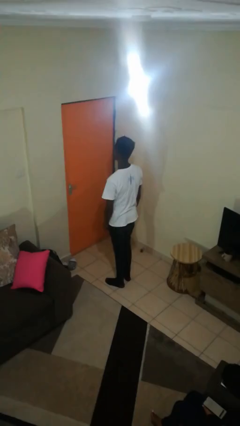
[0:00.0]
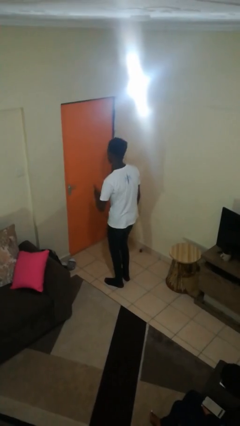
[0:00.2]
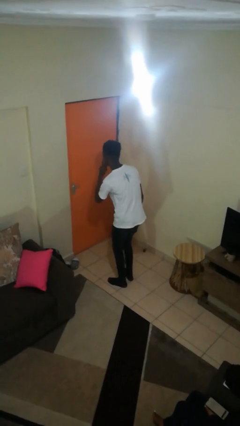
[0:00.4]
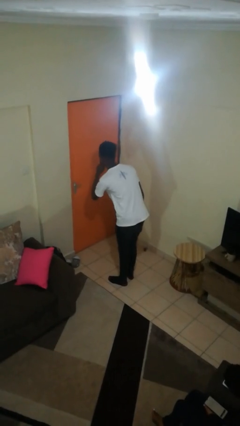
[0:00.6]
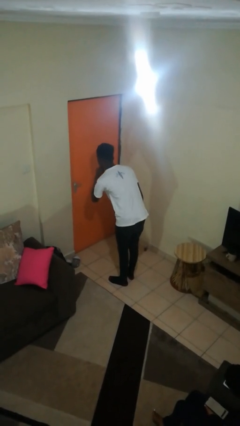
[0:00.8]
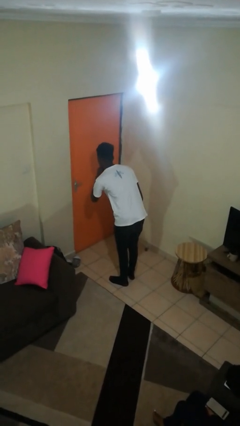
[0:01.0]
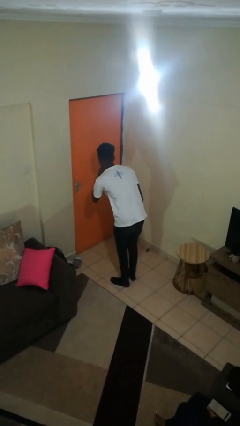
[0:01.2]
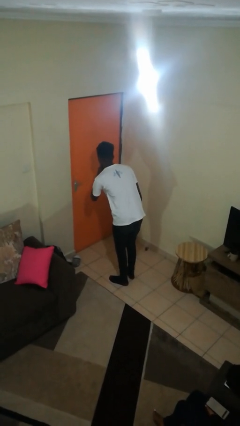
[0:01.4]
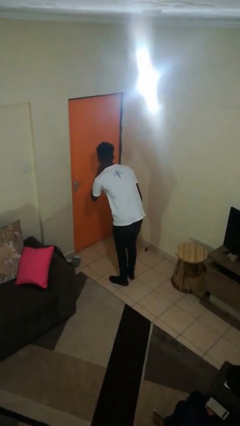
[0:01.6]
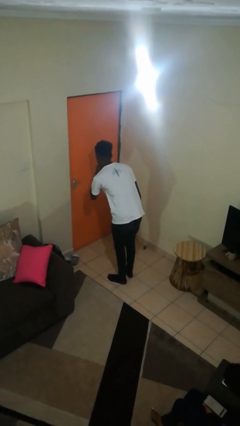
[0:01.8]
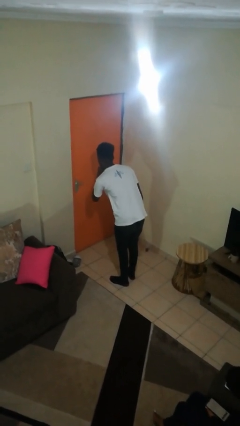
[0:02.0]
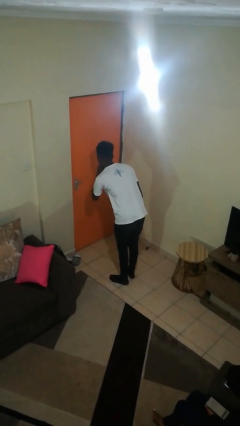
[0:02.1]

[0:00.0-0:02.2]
person gestures be quiet

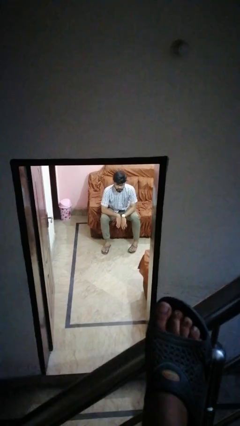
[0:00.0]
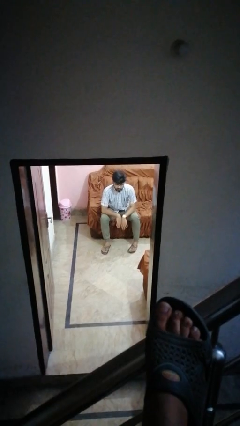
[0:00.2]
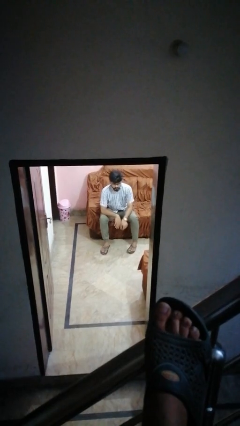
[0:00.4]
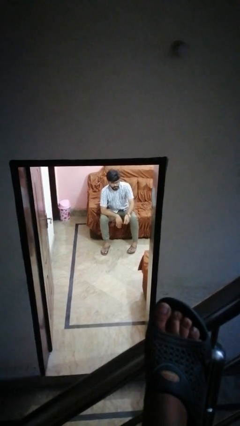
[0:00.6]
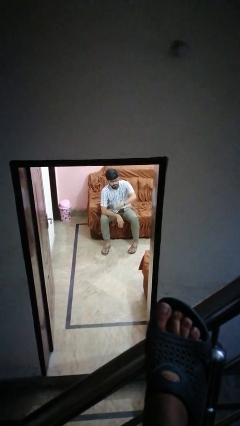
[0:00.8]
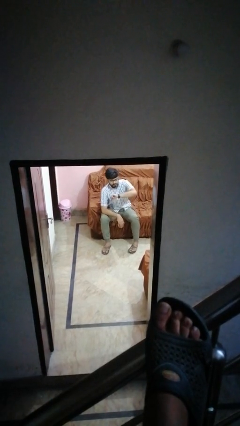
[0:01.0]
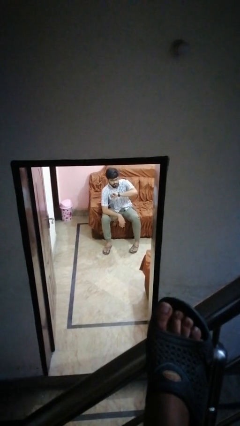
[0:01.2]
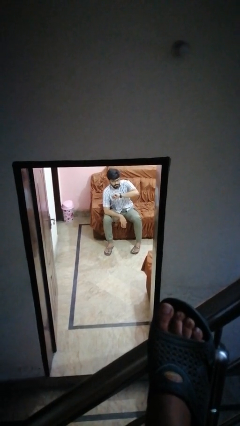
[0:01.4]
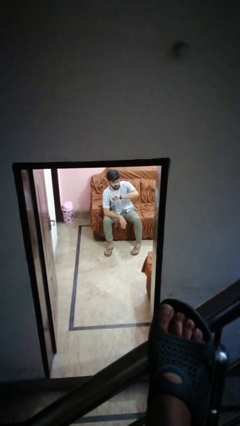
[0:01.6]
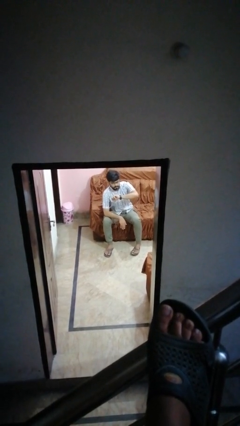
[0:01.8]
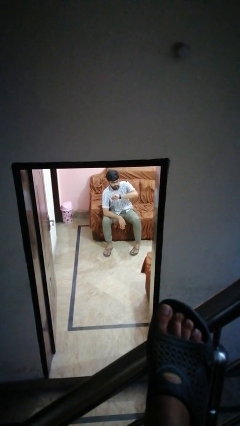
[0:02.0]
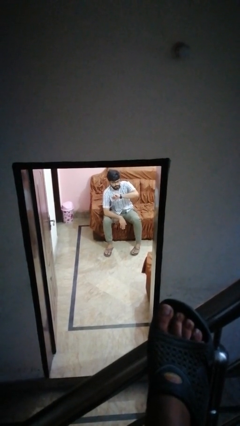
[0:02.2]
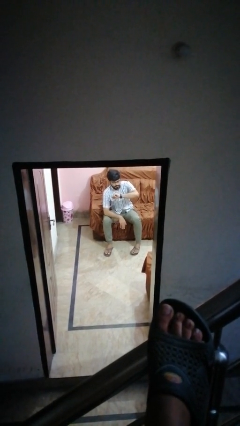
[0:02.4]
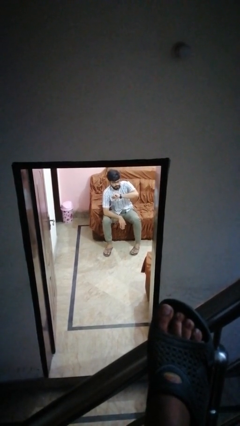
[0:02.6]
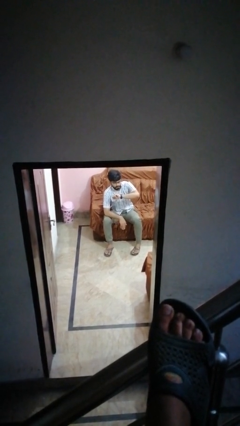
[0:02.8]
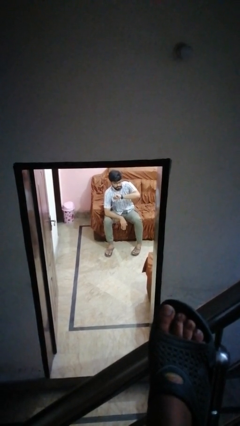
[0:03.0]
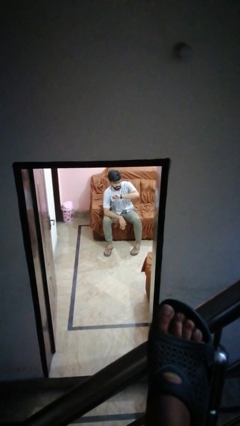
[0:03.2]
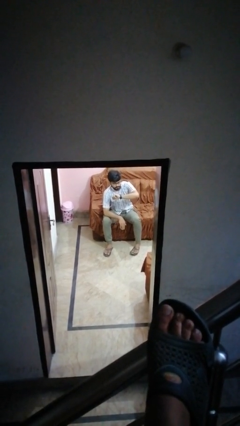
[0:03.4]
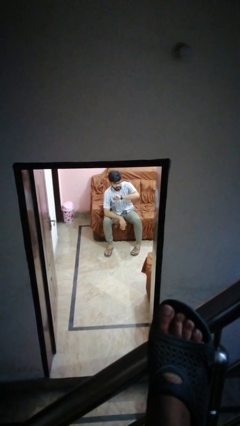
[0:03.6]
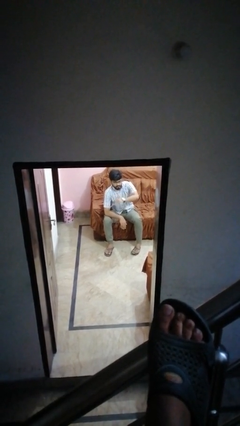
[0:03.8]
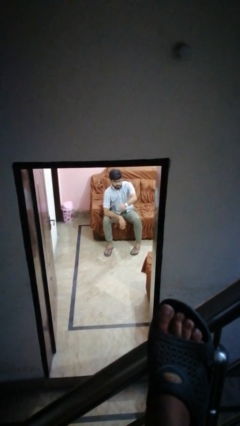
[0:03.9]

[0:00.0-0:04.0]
person looks at wristwatch

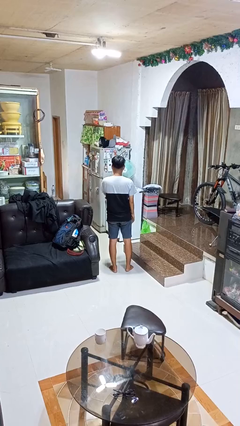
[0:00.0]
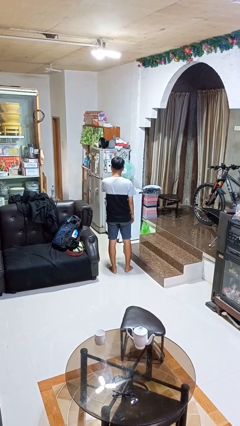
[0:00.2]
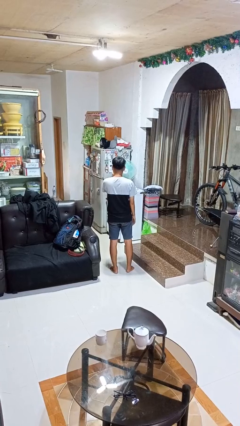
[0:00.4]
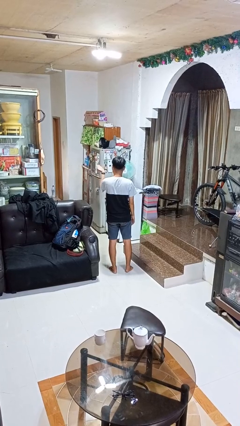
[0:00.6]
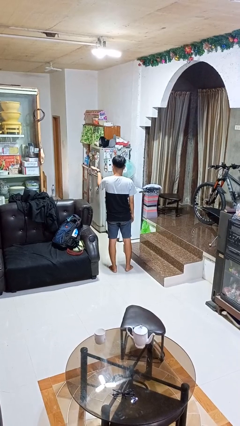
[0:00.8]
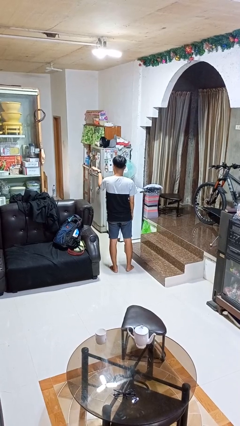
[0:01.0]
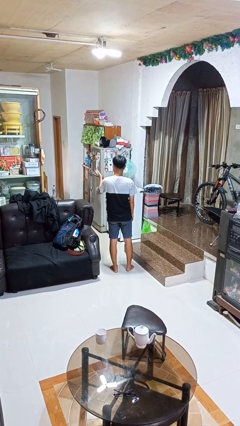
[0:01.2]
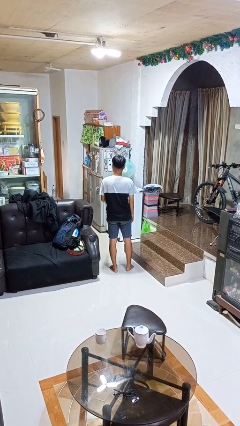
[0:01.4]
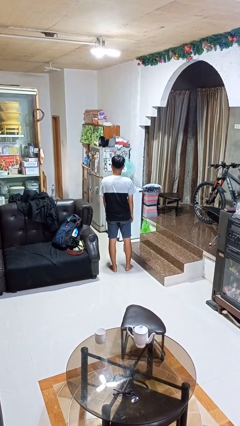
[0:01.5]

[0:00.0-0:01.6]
person gestures blow kiss

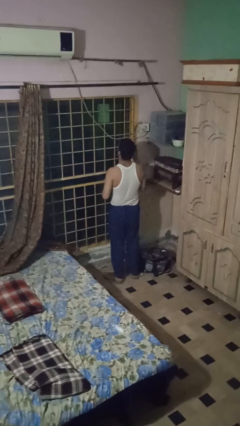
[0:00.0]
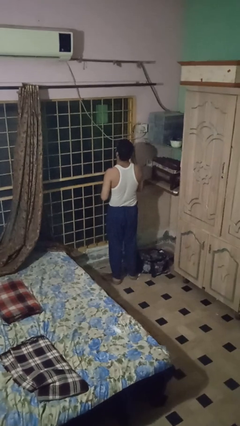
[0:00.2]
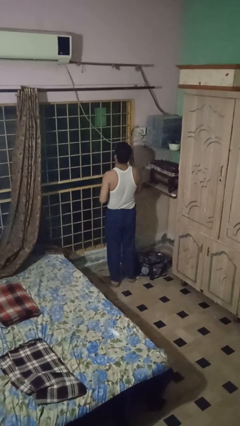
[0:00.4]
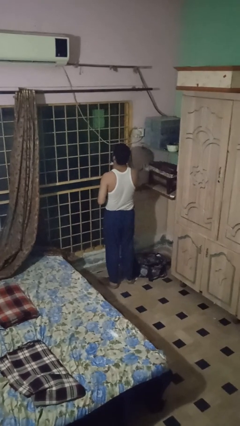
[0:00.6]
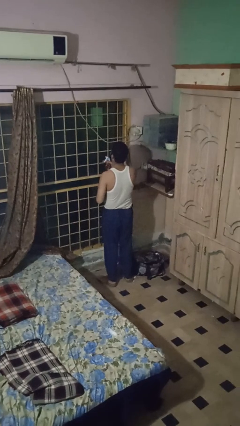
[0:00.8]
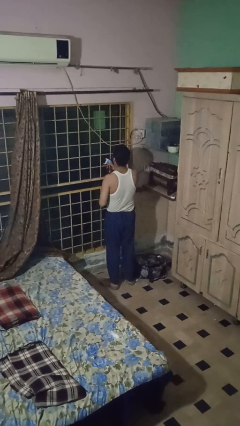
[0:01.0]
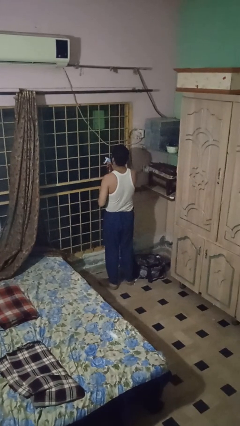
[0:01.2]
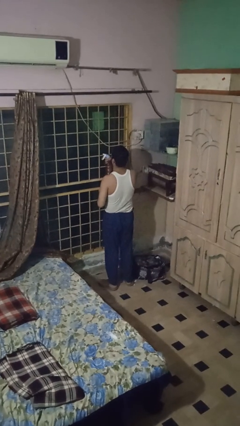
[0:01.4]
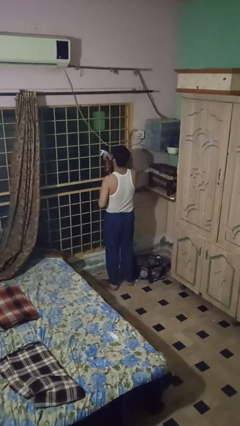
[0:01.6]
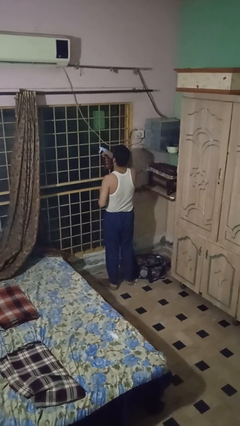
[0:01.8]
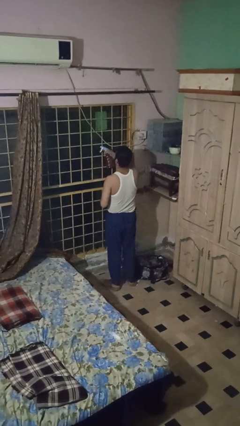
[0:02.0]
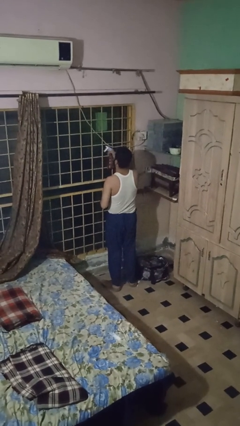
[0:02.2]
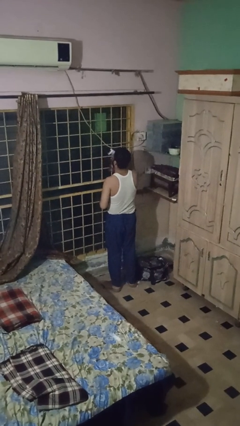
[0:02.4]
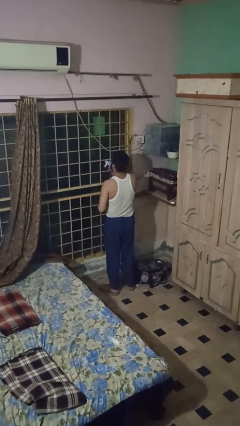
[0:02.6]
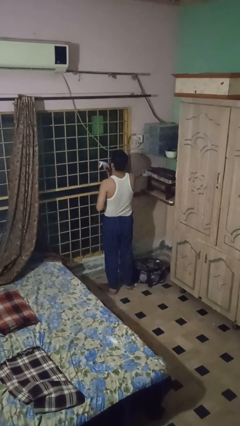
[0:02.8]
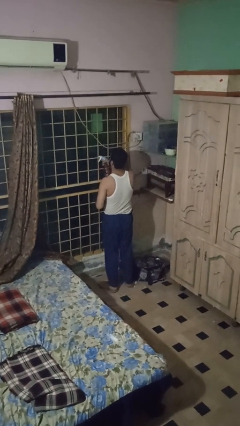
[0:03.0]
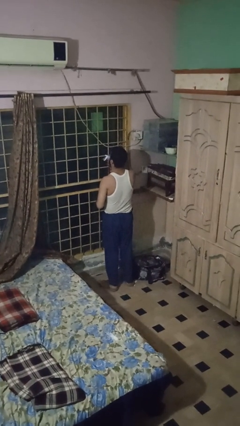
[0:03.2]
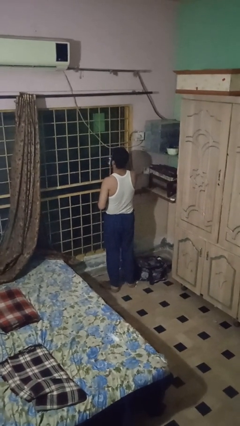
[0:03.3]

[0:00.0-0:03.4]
person sprays from bottle

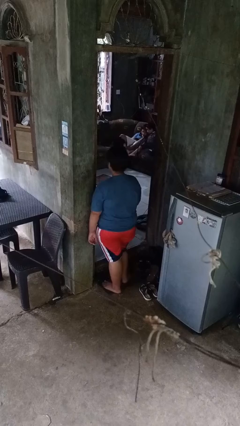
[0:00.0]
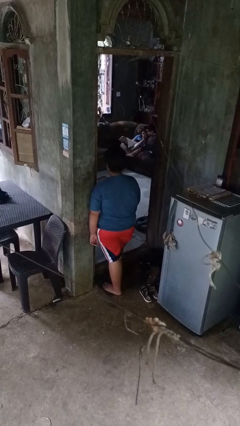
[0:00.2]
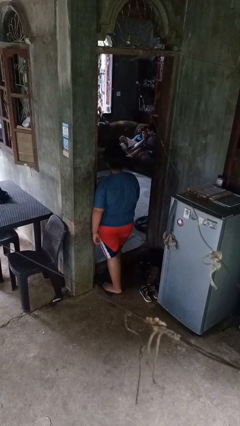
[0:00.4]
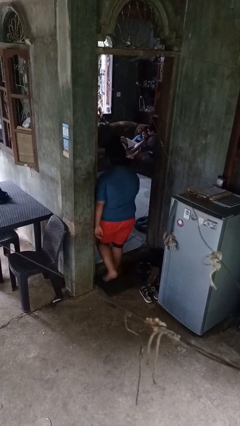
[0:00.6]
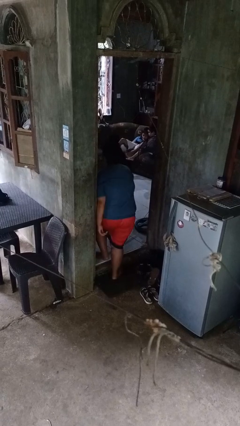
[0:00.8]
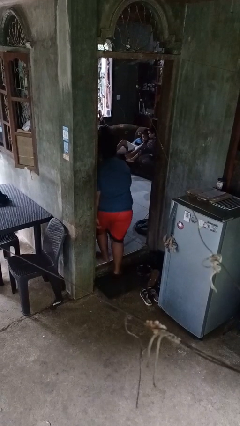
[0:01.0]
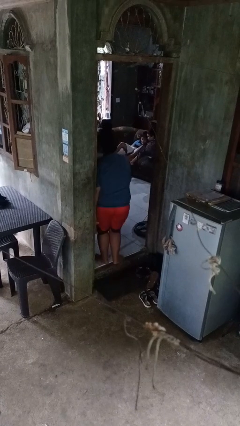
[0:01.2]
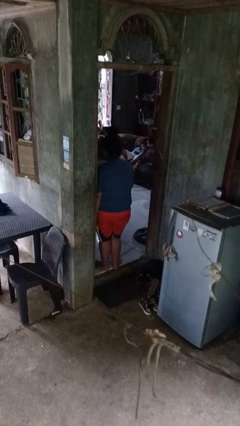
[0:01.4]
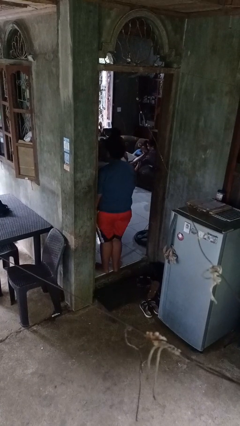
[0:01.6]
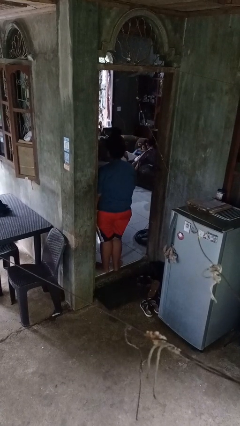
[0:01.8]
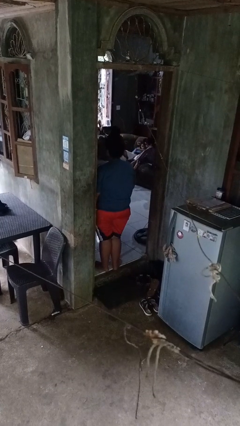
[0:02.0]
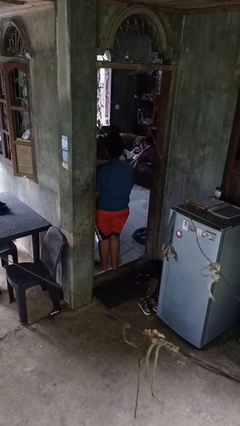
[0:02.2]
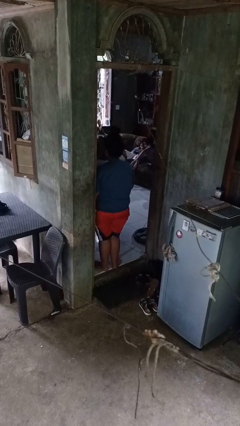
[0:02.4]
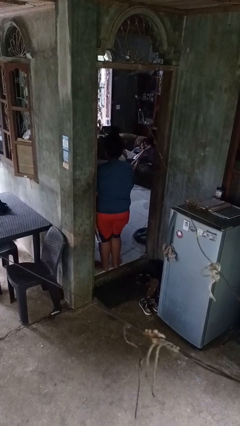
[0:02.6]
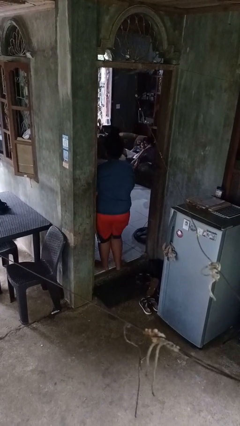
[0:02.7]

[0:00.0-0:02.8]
person bumps into wall

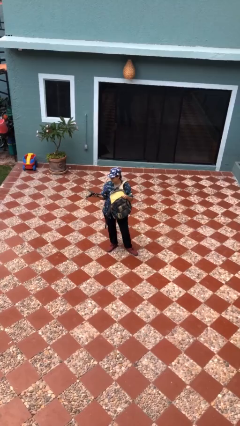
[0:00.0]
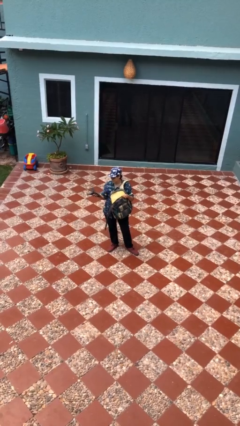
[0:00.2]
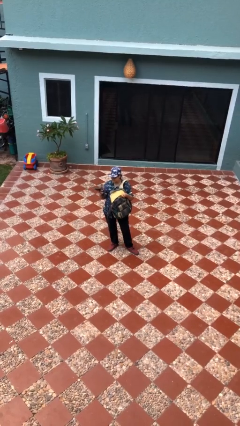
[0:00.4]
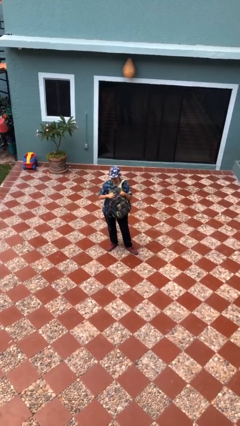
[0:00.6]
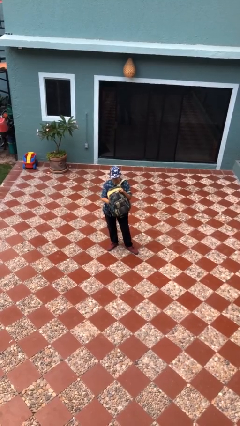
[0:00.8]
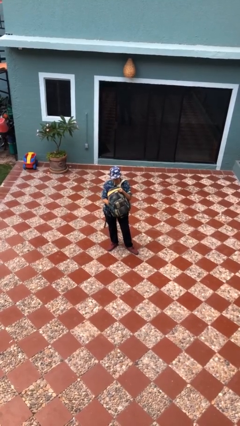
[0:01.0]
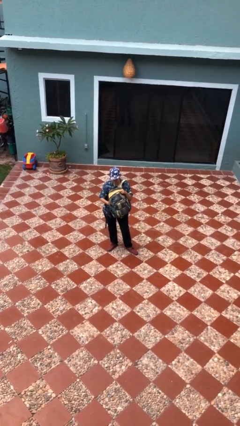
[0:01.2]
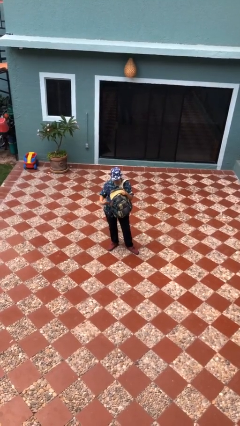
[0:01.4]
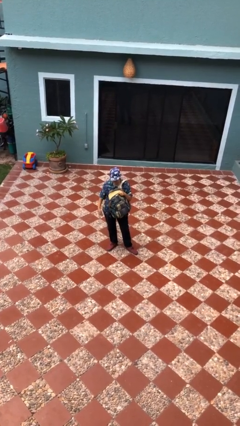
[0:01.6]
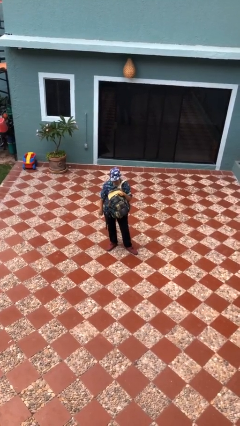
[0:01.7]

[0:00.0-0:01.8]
person puts object into backpack

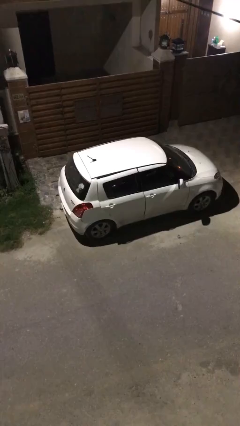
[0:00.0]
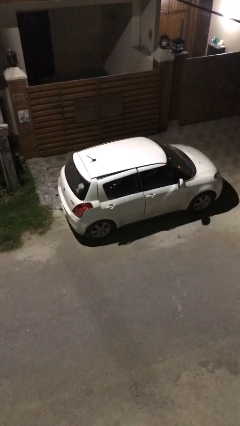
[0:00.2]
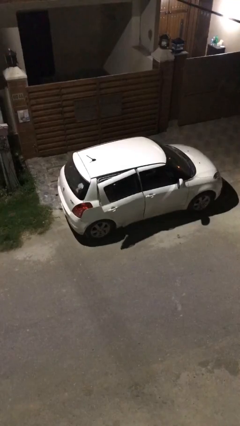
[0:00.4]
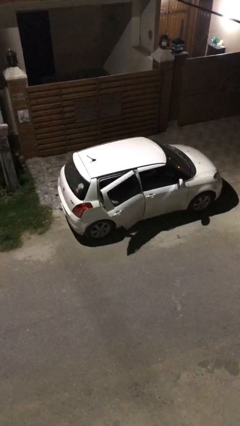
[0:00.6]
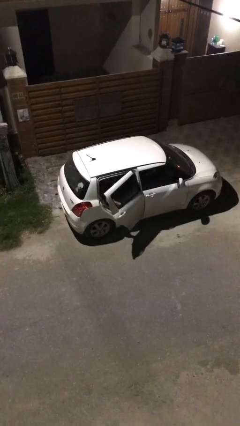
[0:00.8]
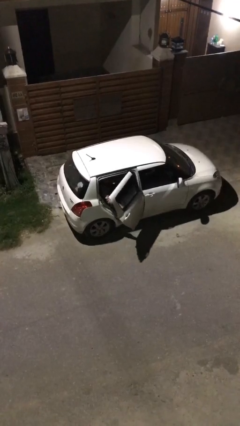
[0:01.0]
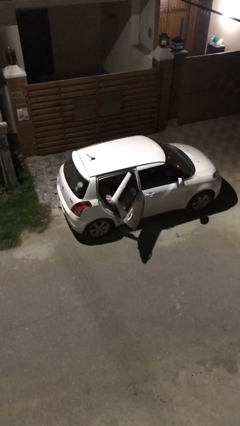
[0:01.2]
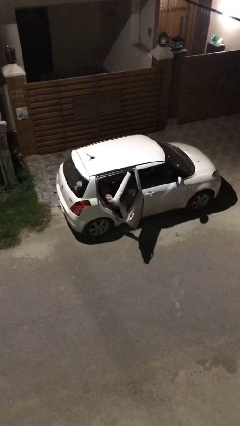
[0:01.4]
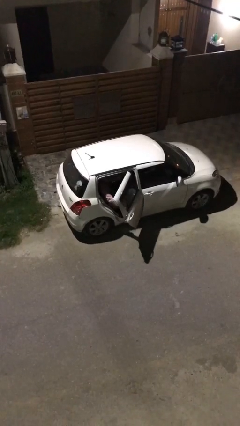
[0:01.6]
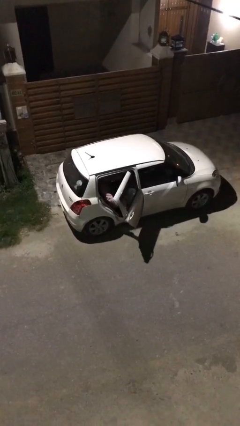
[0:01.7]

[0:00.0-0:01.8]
person opens car door
